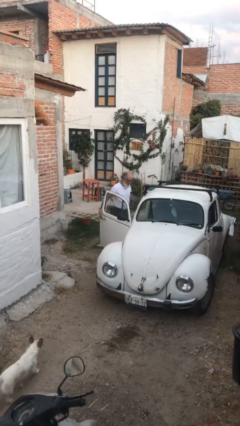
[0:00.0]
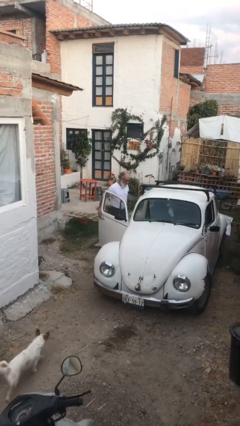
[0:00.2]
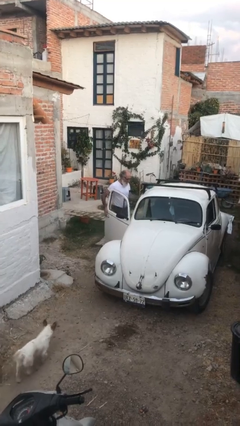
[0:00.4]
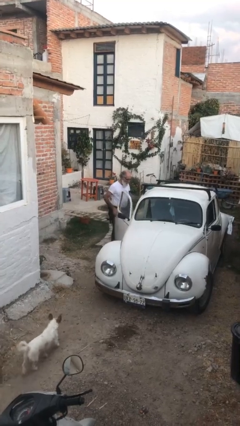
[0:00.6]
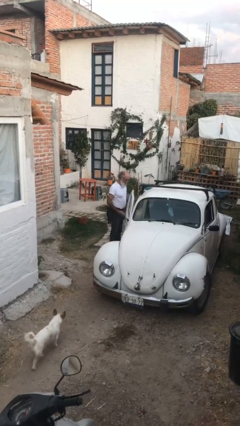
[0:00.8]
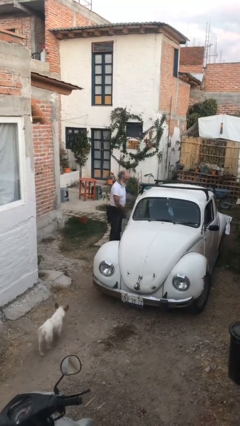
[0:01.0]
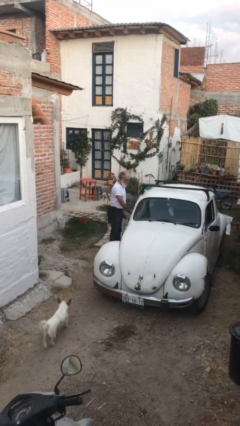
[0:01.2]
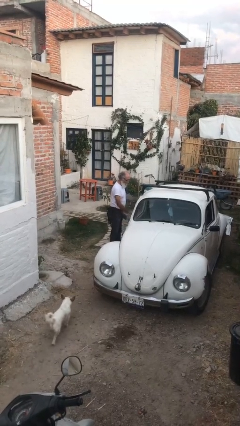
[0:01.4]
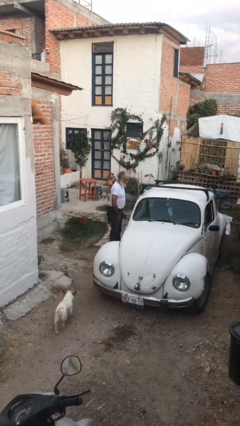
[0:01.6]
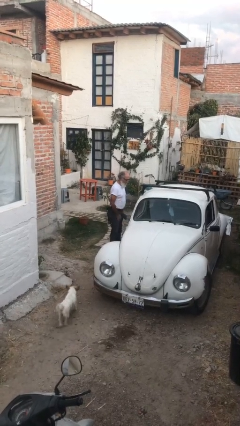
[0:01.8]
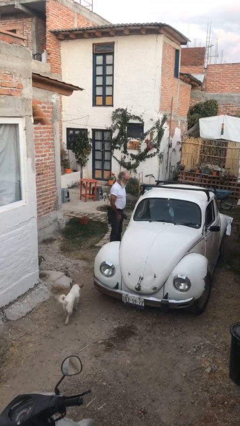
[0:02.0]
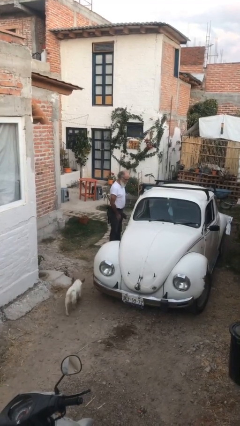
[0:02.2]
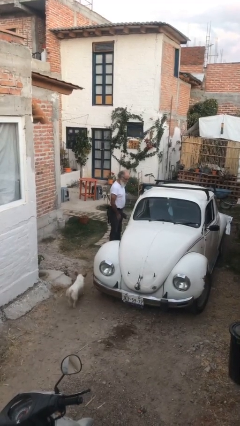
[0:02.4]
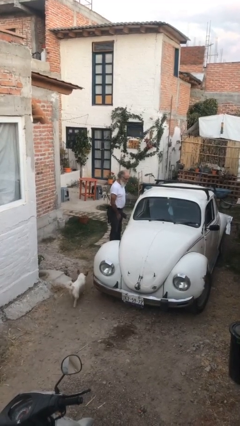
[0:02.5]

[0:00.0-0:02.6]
person closes car door

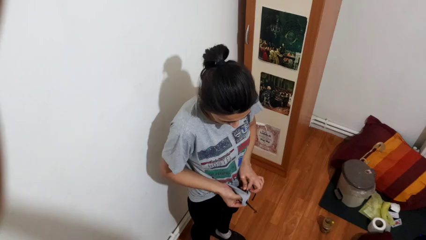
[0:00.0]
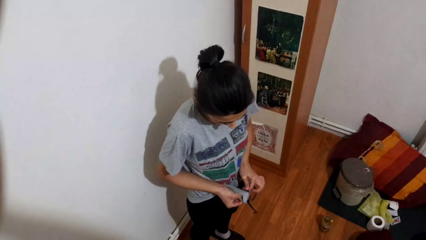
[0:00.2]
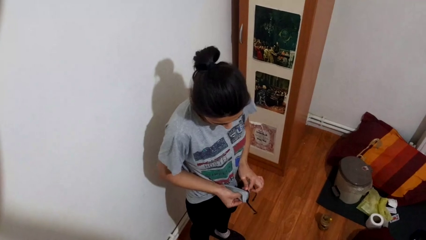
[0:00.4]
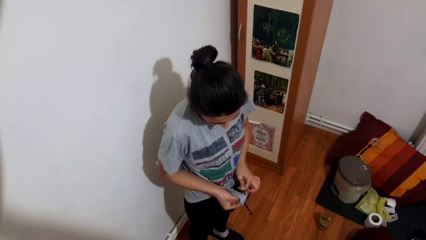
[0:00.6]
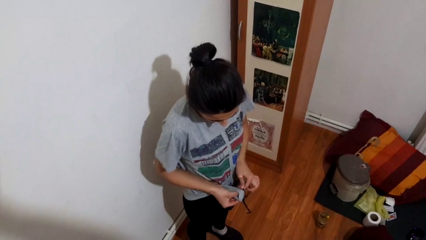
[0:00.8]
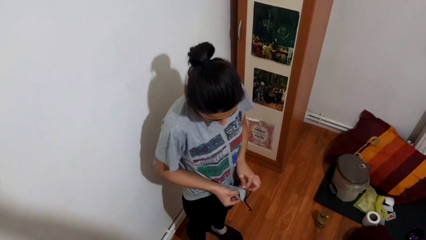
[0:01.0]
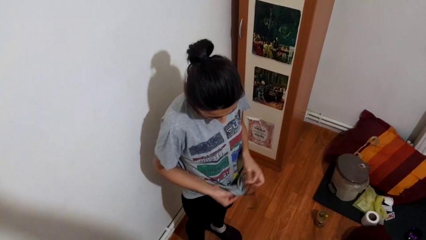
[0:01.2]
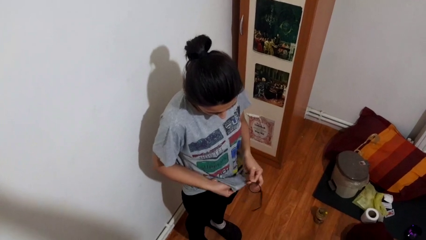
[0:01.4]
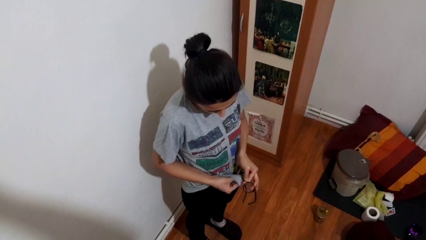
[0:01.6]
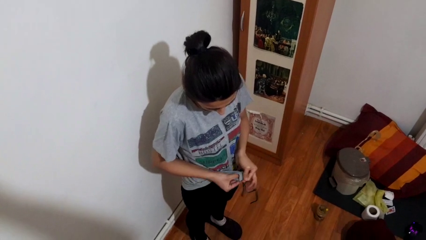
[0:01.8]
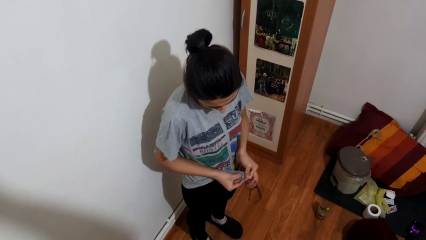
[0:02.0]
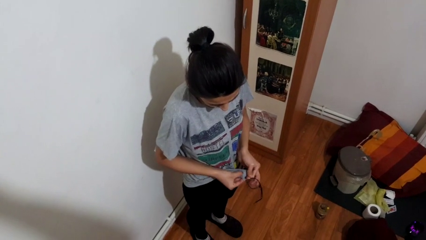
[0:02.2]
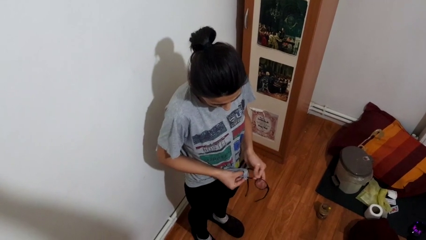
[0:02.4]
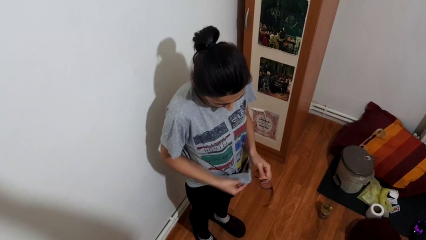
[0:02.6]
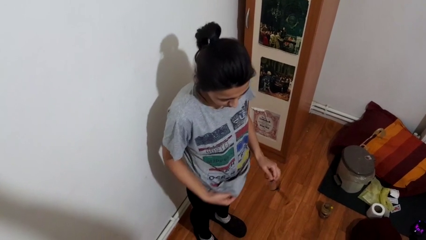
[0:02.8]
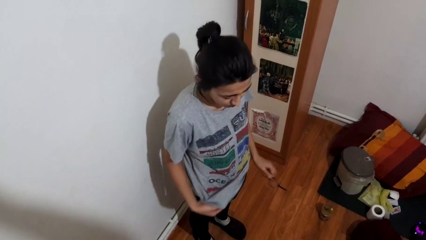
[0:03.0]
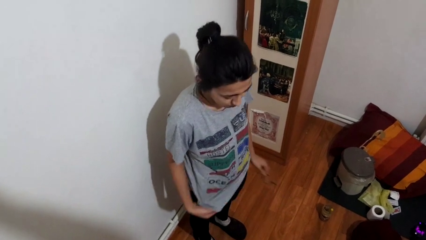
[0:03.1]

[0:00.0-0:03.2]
person cleans eyeglasses

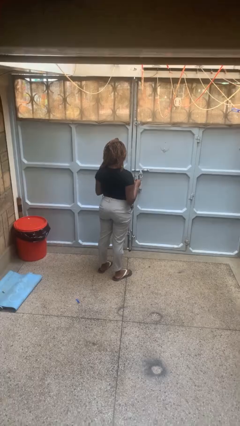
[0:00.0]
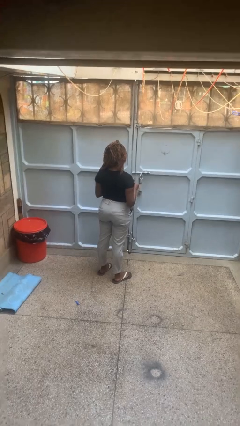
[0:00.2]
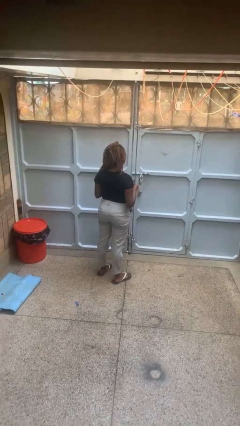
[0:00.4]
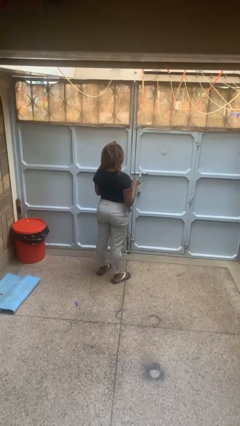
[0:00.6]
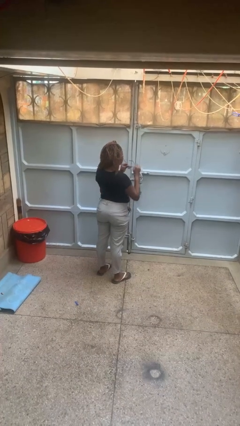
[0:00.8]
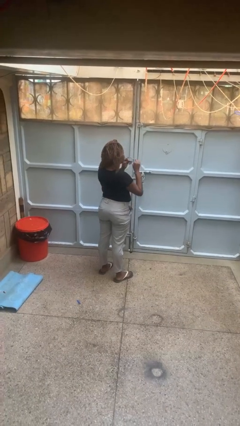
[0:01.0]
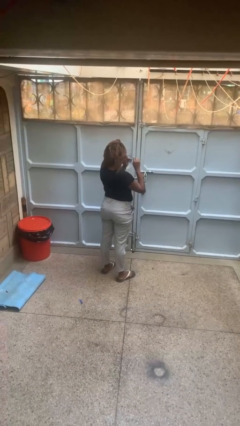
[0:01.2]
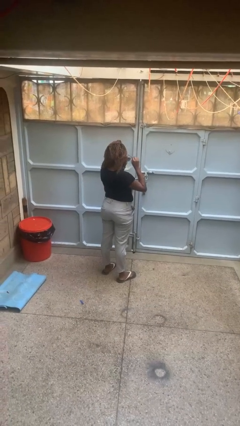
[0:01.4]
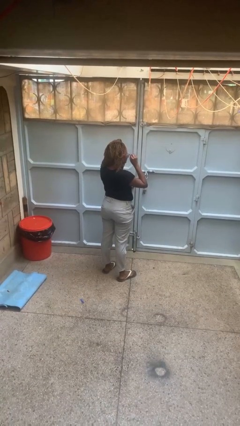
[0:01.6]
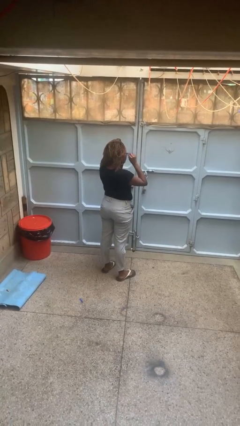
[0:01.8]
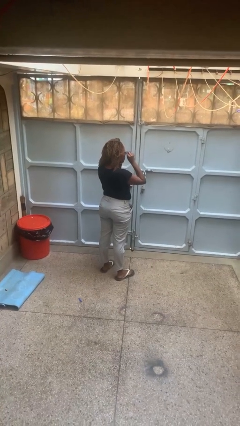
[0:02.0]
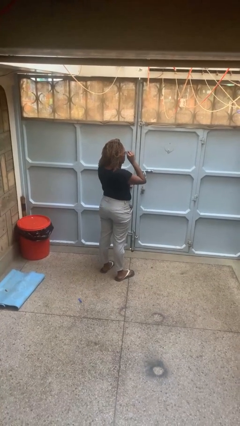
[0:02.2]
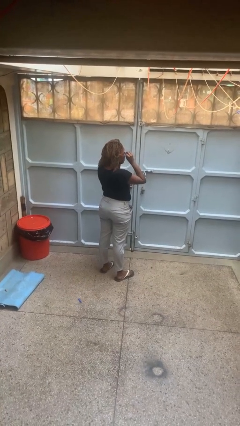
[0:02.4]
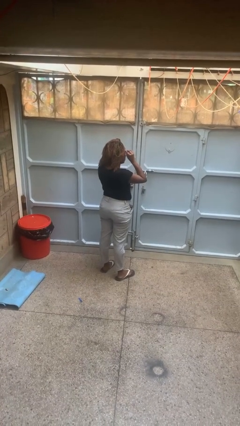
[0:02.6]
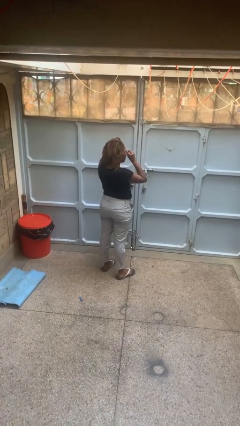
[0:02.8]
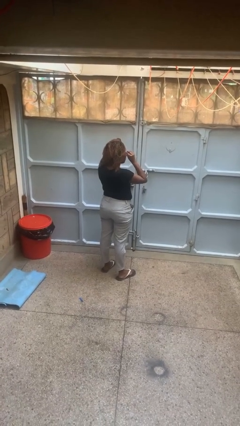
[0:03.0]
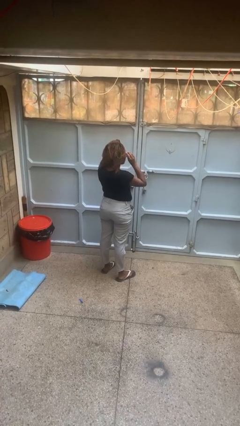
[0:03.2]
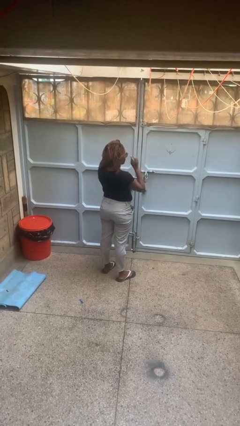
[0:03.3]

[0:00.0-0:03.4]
person puts on glasses

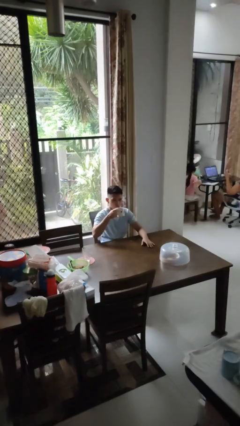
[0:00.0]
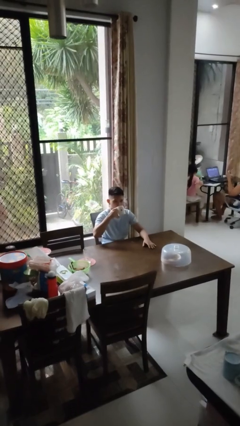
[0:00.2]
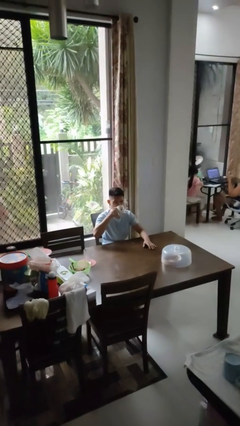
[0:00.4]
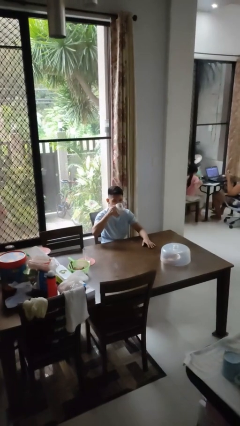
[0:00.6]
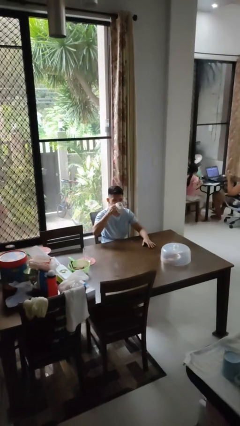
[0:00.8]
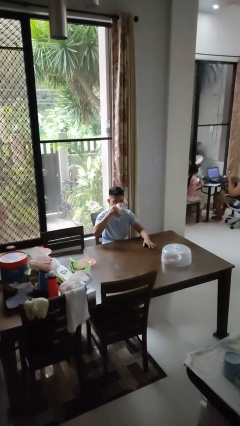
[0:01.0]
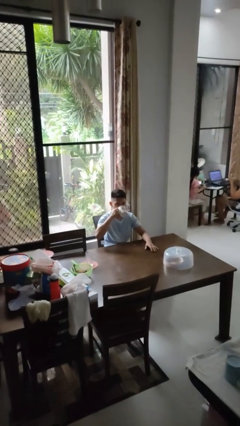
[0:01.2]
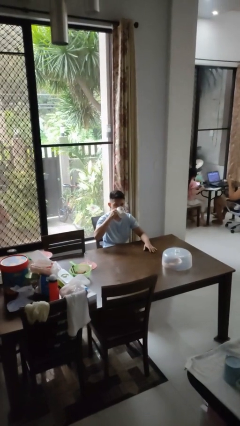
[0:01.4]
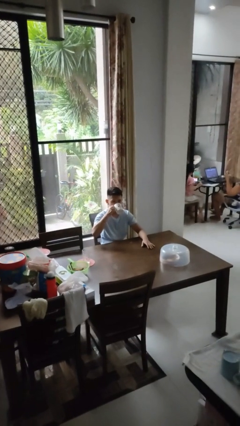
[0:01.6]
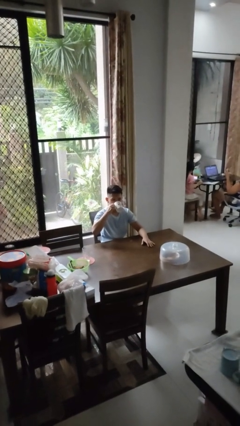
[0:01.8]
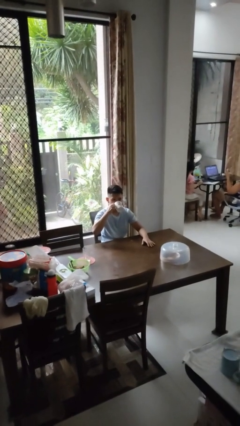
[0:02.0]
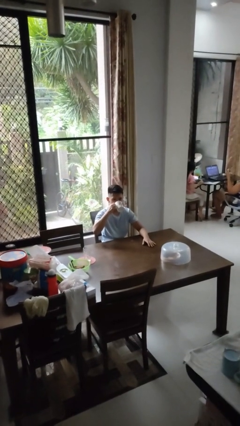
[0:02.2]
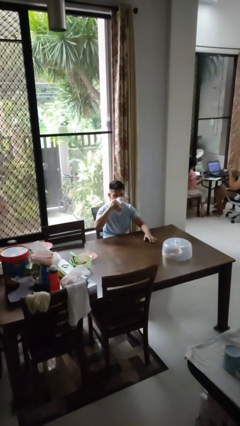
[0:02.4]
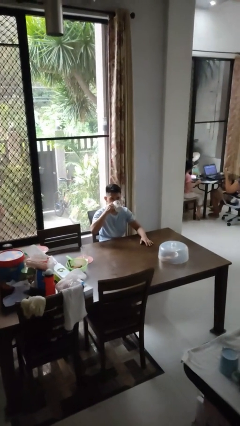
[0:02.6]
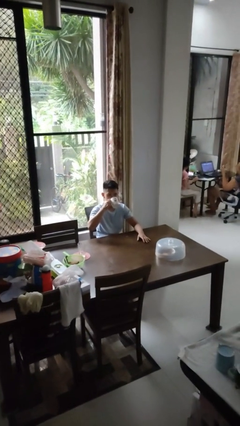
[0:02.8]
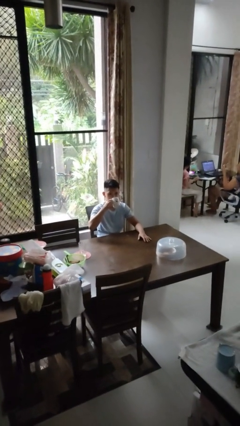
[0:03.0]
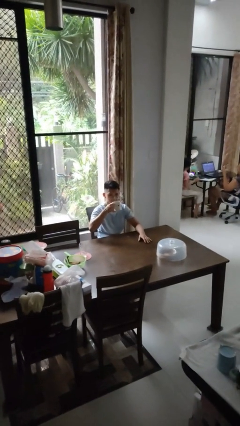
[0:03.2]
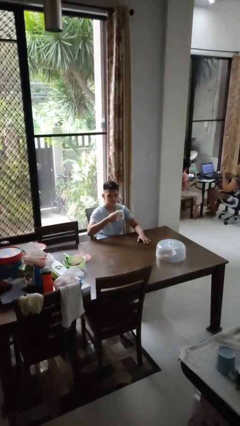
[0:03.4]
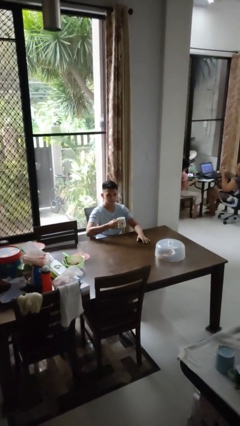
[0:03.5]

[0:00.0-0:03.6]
person drinks from mug

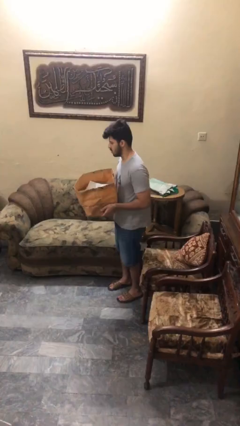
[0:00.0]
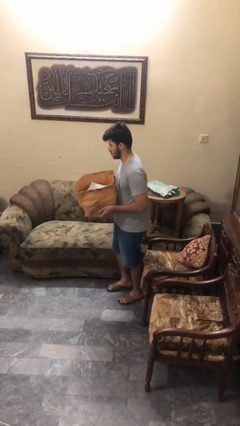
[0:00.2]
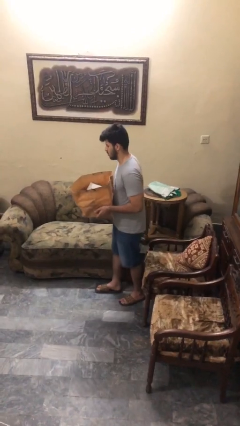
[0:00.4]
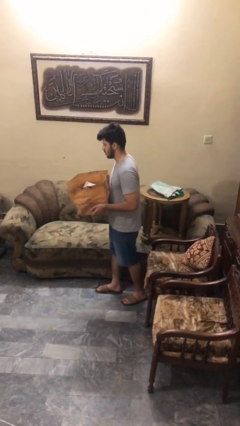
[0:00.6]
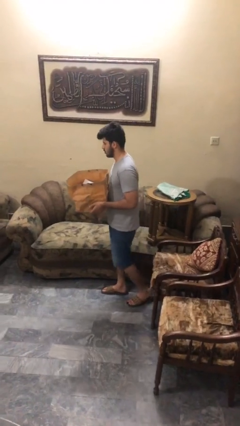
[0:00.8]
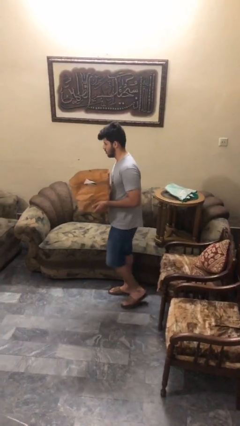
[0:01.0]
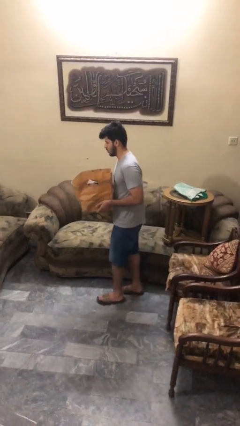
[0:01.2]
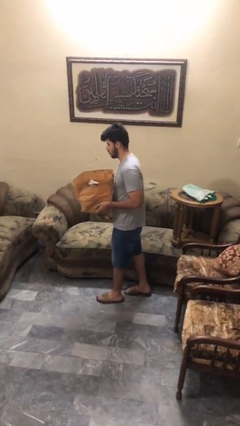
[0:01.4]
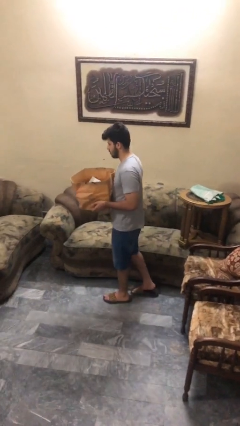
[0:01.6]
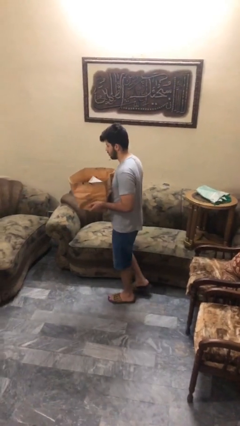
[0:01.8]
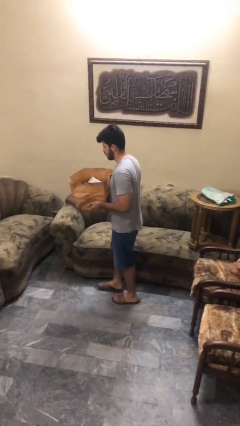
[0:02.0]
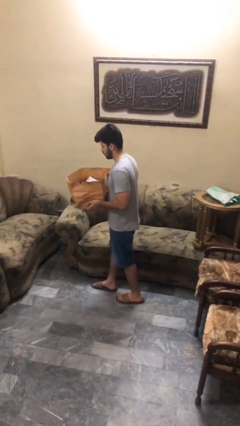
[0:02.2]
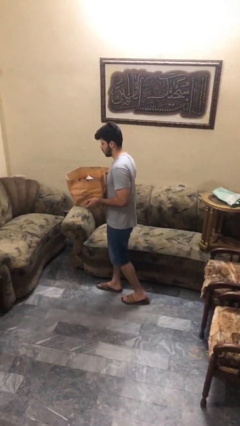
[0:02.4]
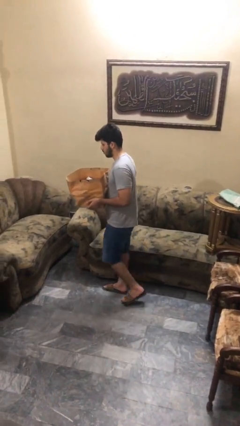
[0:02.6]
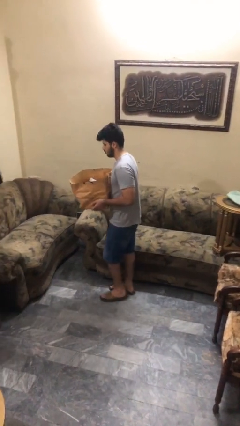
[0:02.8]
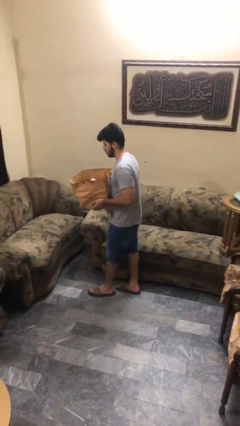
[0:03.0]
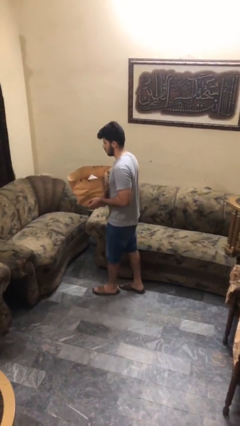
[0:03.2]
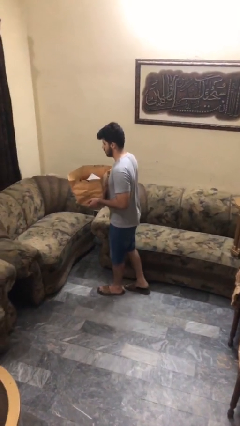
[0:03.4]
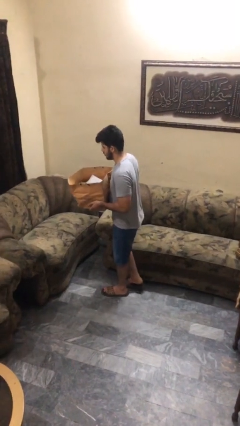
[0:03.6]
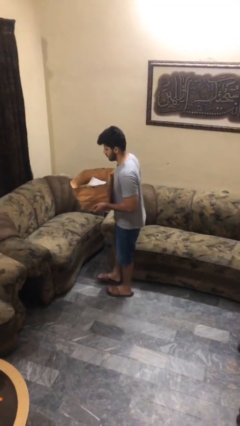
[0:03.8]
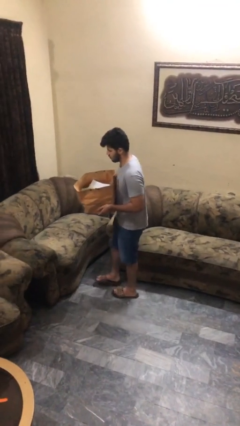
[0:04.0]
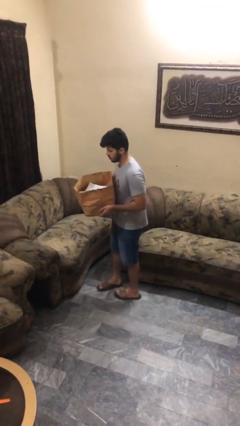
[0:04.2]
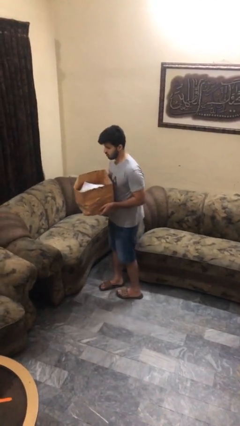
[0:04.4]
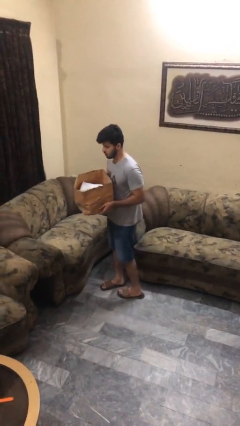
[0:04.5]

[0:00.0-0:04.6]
person carries groceries

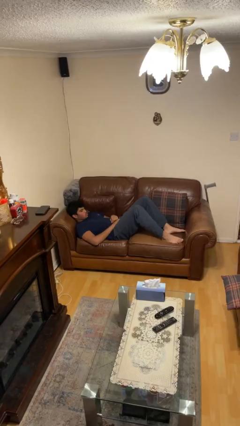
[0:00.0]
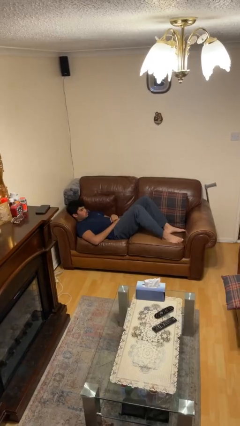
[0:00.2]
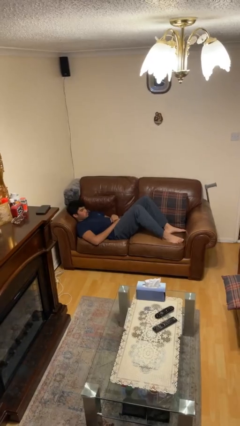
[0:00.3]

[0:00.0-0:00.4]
person stands up
